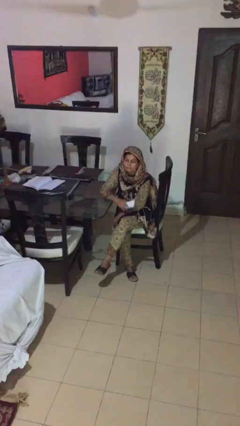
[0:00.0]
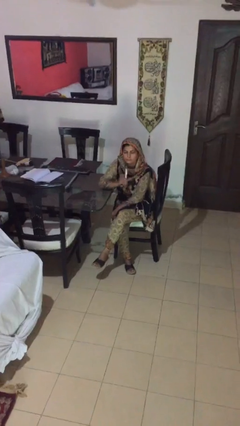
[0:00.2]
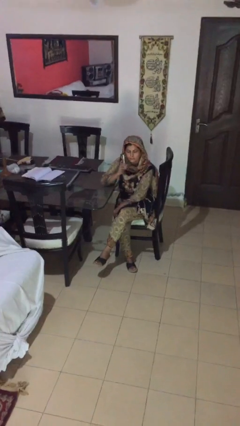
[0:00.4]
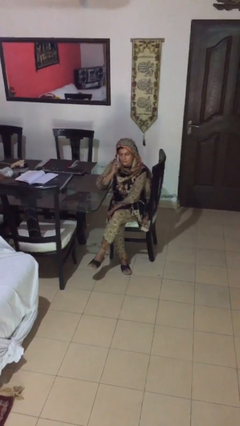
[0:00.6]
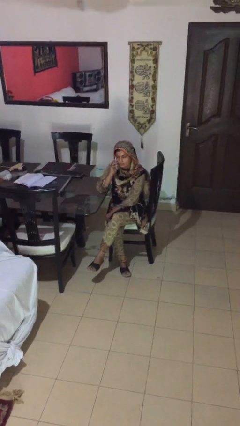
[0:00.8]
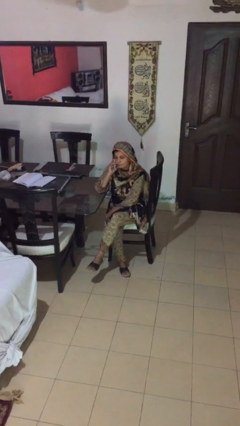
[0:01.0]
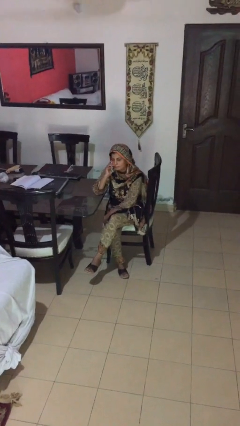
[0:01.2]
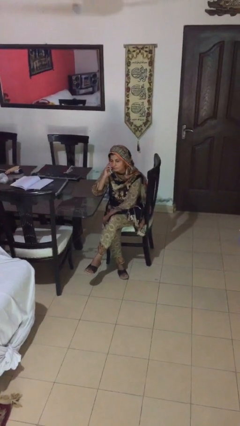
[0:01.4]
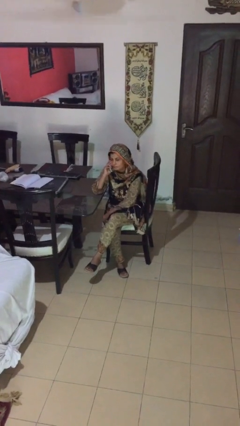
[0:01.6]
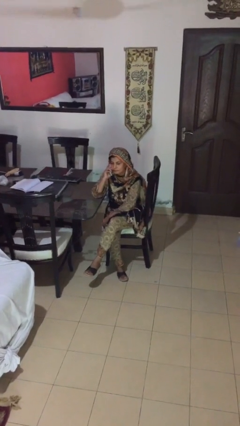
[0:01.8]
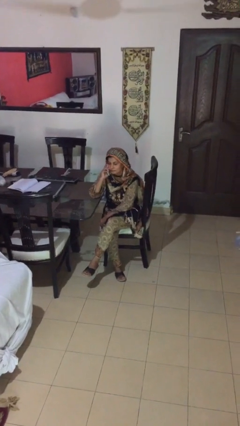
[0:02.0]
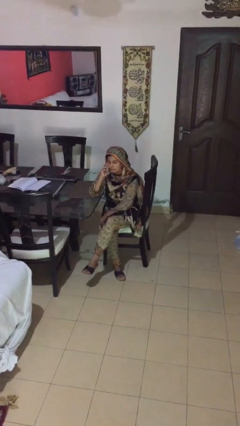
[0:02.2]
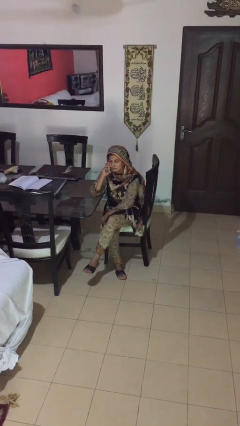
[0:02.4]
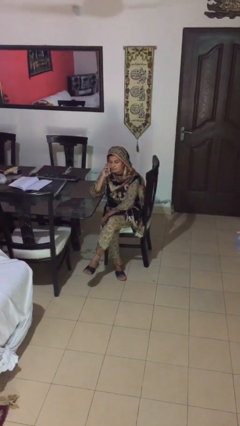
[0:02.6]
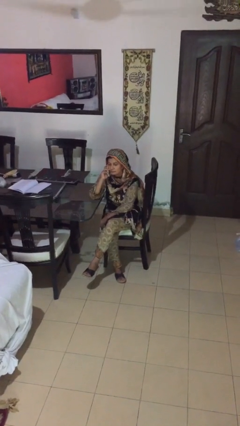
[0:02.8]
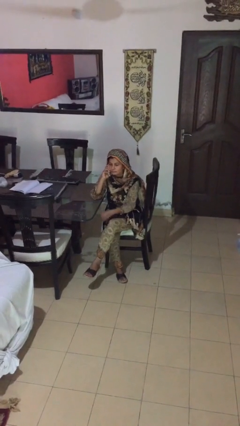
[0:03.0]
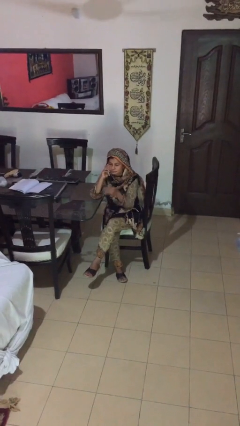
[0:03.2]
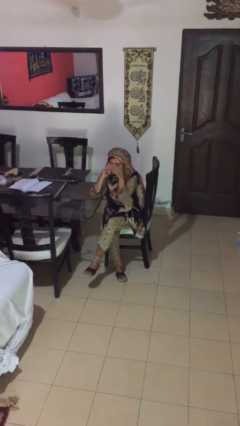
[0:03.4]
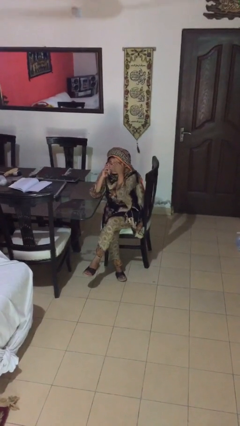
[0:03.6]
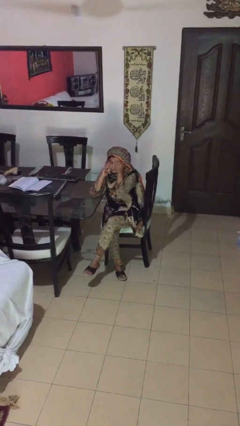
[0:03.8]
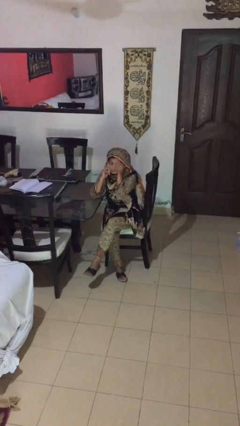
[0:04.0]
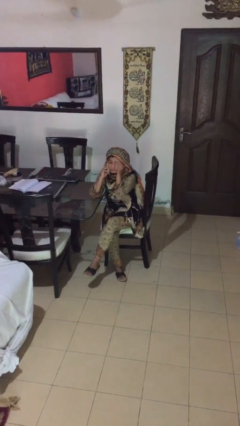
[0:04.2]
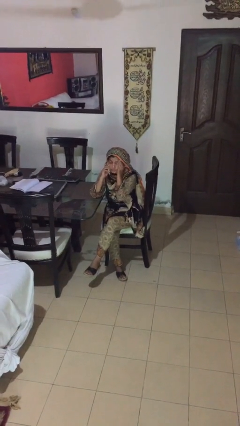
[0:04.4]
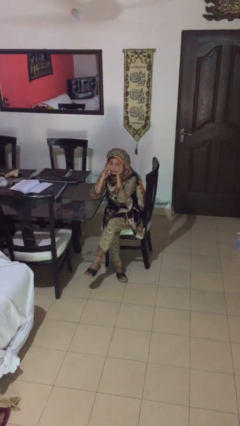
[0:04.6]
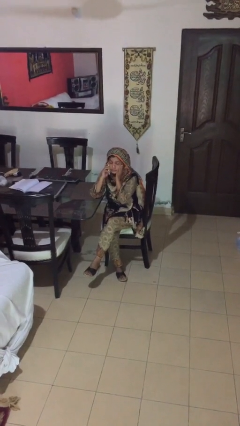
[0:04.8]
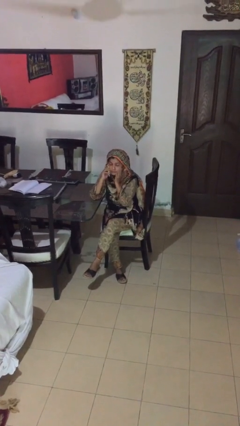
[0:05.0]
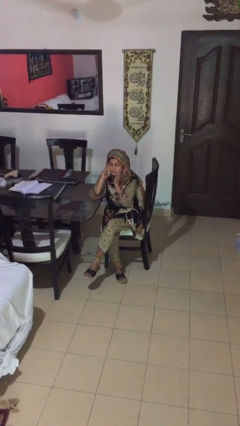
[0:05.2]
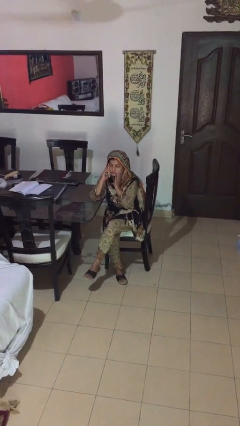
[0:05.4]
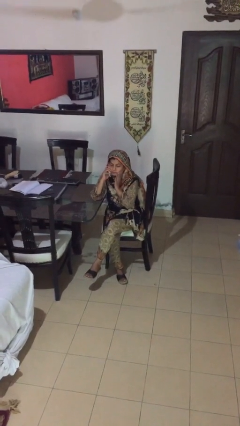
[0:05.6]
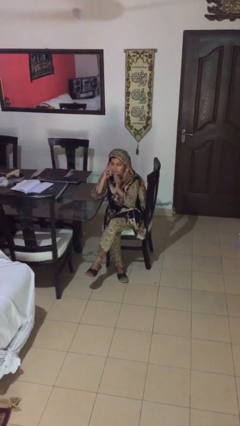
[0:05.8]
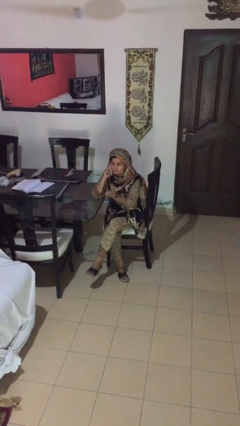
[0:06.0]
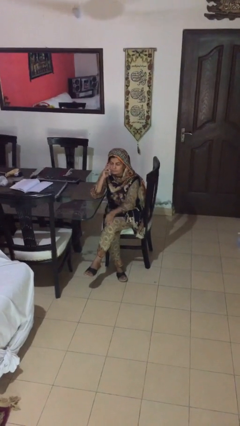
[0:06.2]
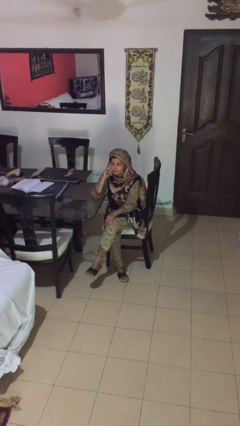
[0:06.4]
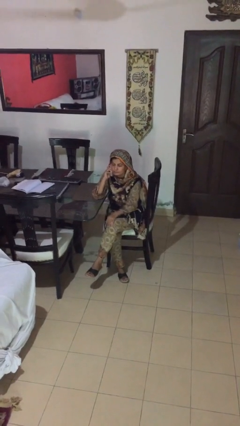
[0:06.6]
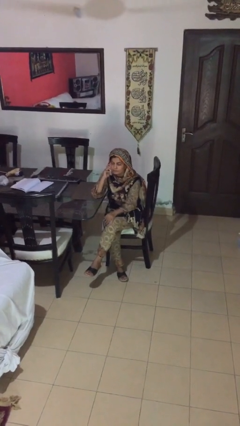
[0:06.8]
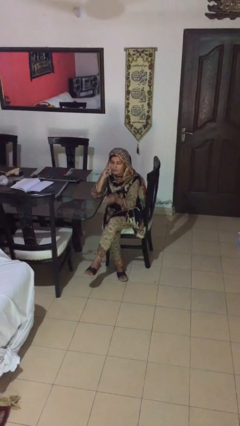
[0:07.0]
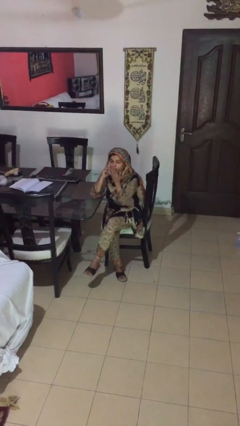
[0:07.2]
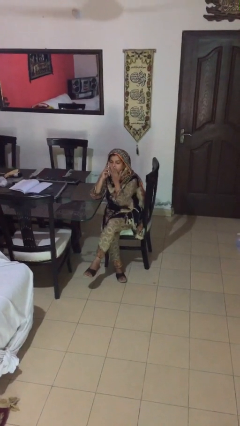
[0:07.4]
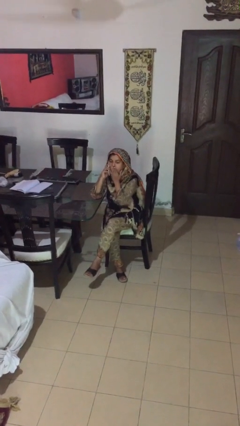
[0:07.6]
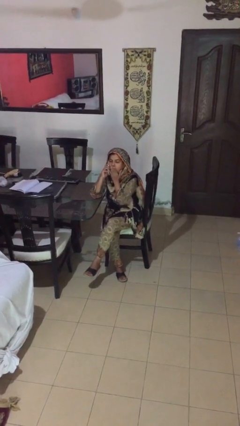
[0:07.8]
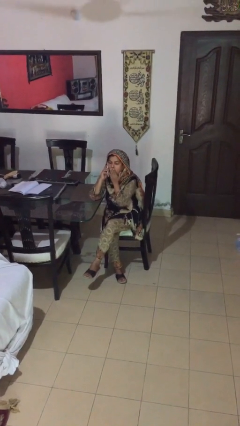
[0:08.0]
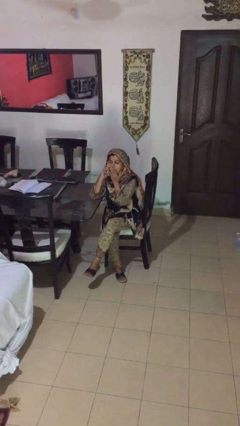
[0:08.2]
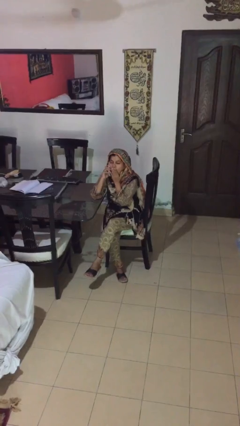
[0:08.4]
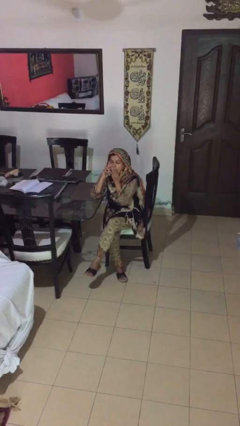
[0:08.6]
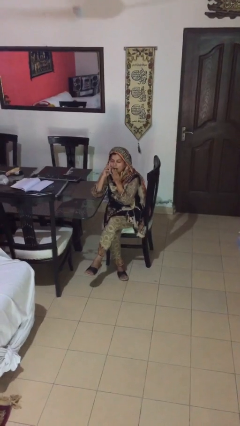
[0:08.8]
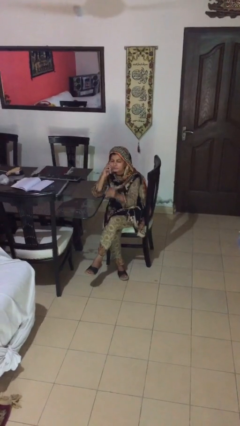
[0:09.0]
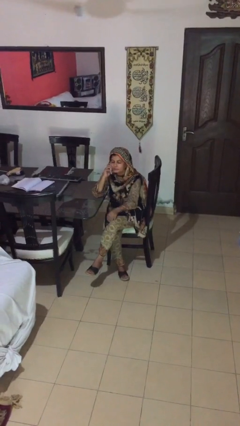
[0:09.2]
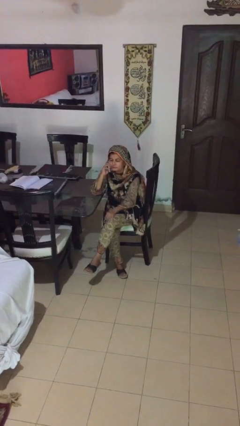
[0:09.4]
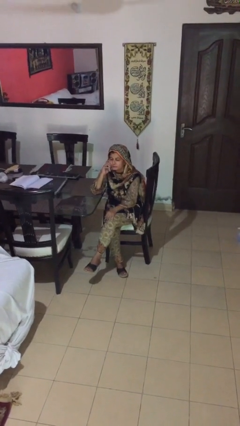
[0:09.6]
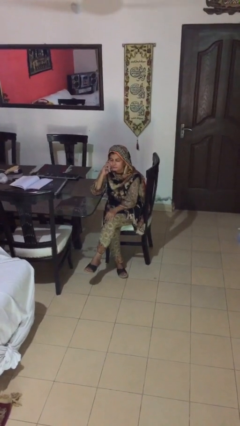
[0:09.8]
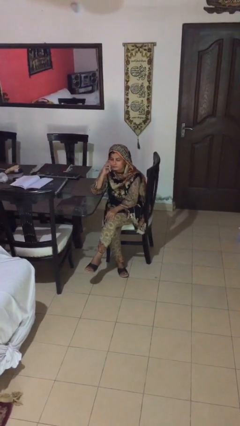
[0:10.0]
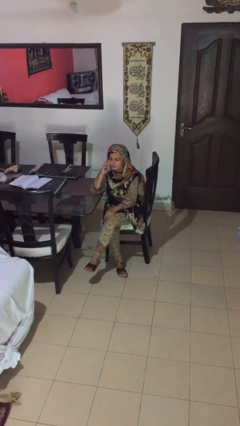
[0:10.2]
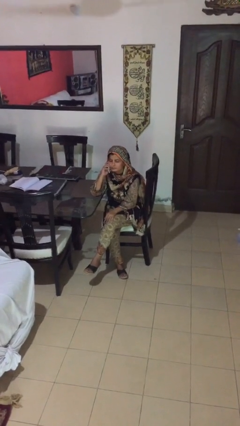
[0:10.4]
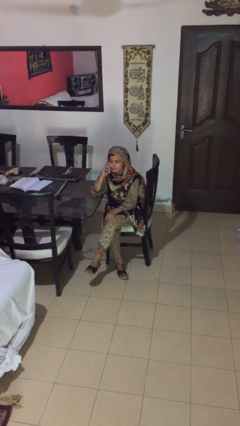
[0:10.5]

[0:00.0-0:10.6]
person talks on phone

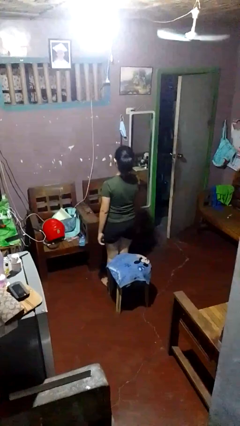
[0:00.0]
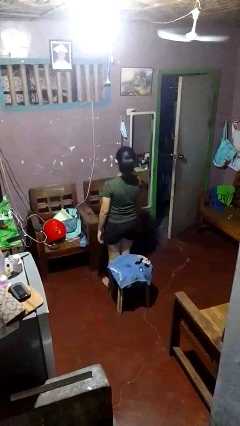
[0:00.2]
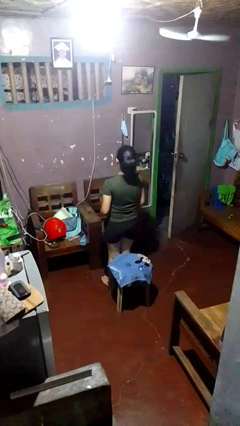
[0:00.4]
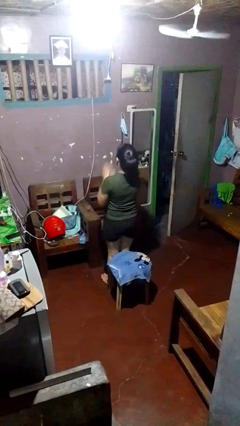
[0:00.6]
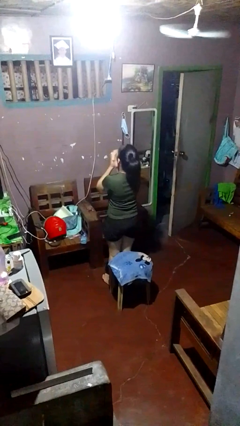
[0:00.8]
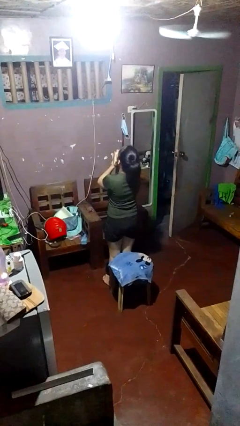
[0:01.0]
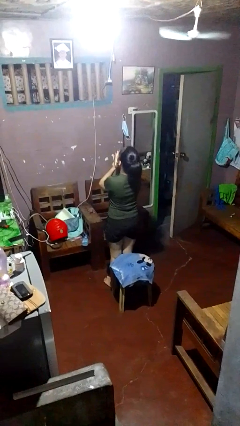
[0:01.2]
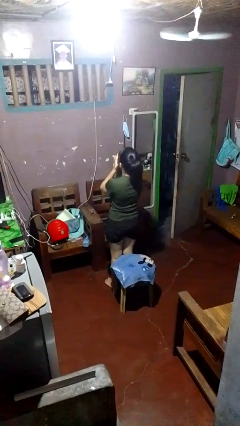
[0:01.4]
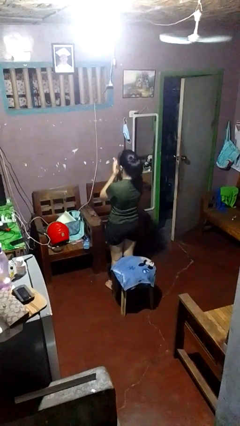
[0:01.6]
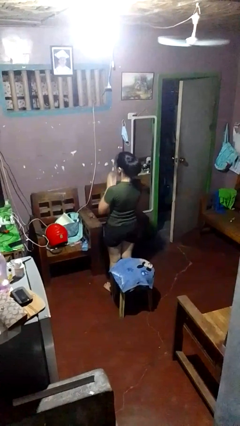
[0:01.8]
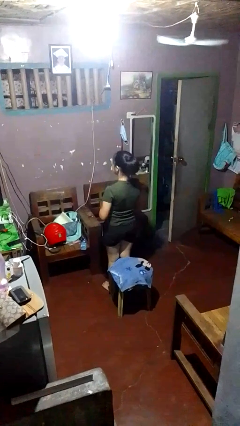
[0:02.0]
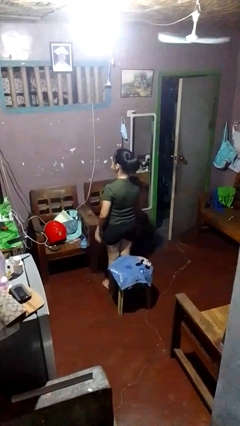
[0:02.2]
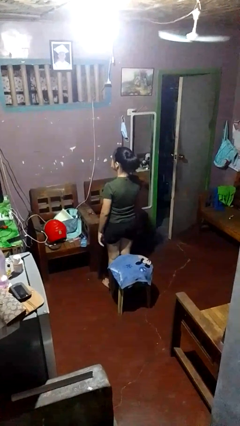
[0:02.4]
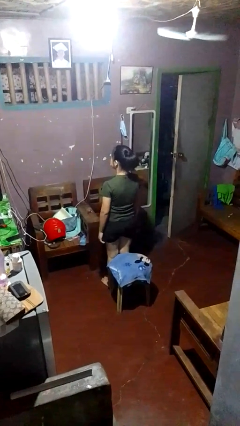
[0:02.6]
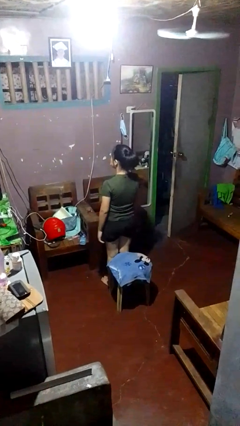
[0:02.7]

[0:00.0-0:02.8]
person yawns

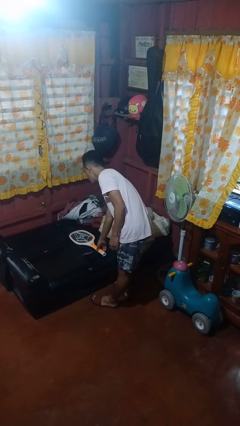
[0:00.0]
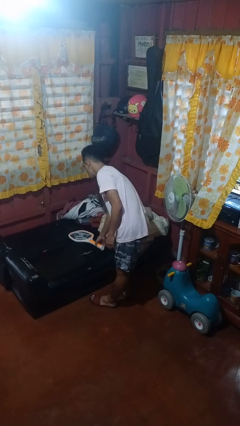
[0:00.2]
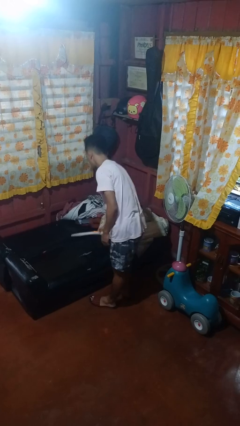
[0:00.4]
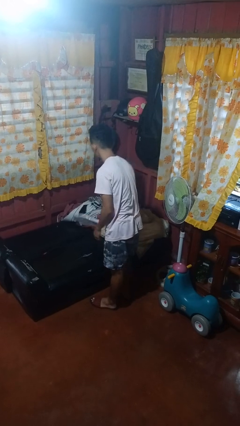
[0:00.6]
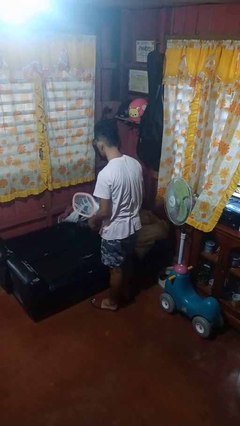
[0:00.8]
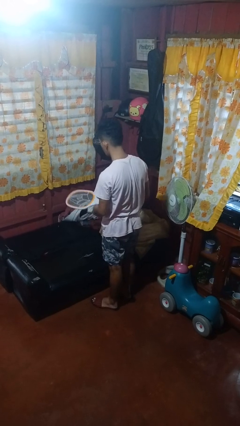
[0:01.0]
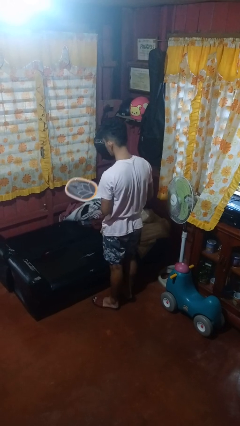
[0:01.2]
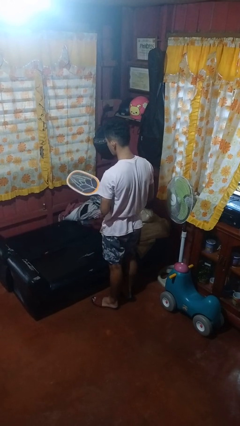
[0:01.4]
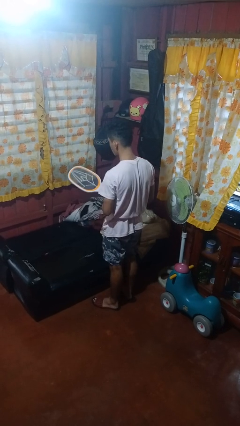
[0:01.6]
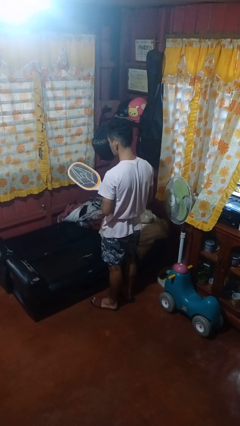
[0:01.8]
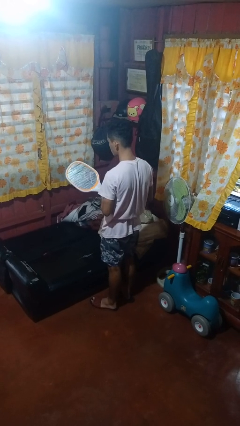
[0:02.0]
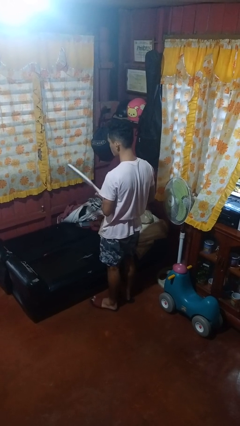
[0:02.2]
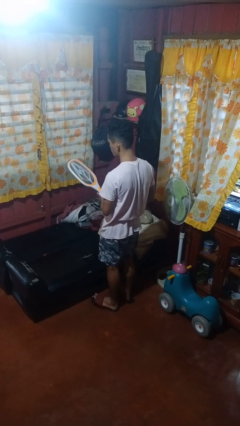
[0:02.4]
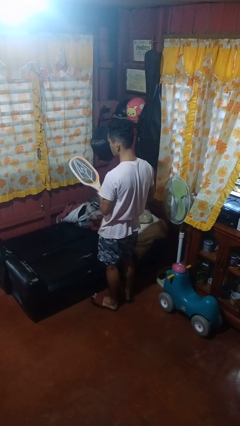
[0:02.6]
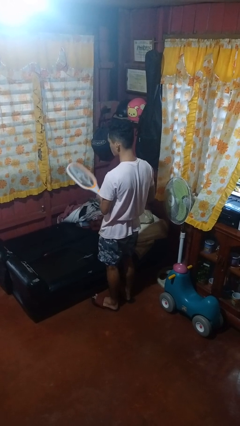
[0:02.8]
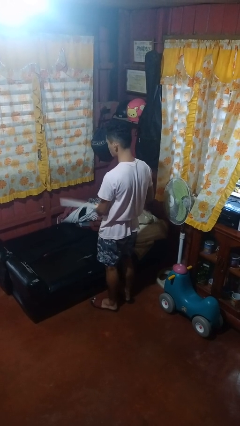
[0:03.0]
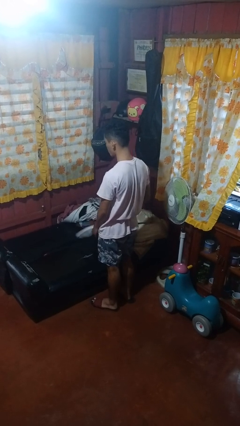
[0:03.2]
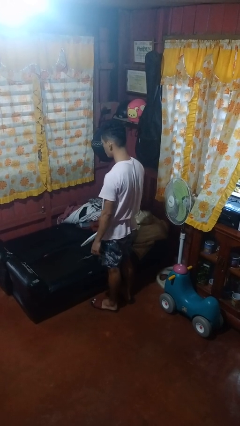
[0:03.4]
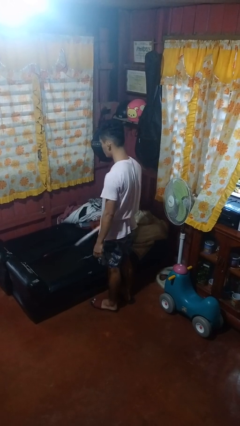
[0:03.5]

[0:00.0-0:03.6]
person picks up object from couch

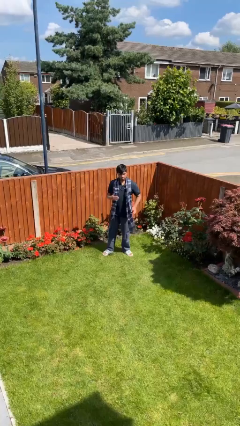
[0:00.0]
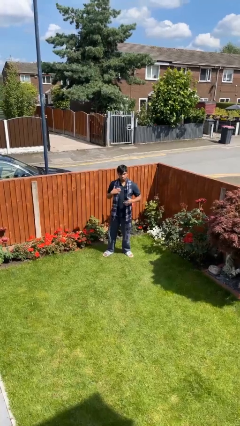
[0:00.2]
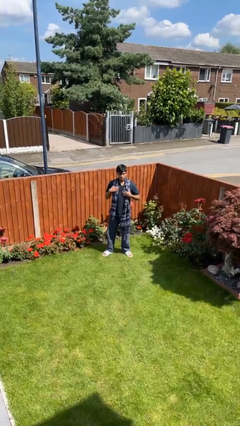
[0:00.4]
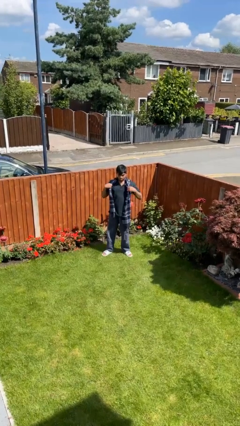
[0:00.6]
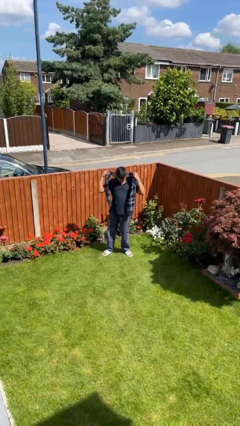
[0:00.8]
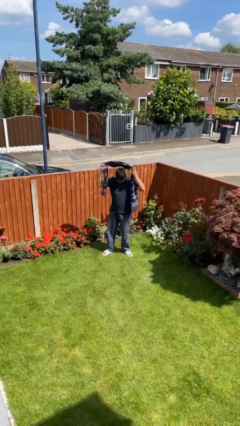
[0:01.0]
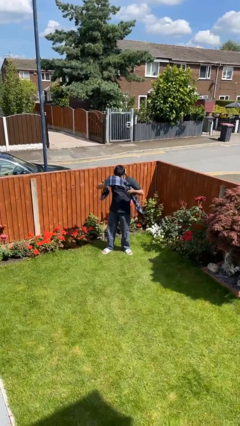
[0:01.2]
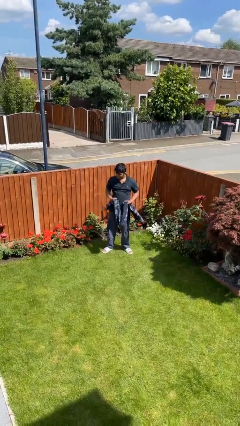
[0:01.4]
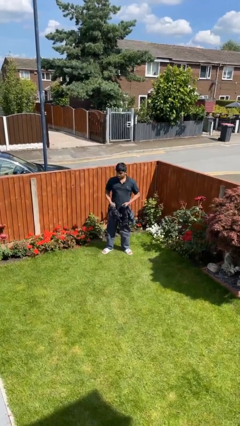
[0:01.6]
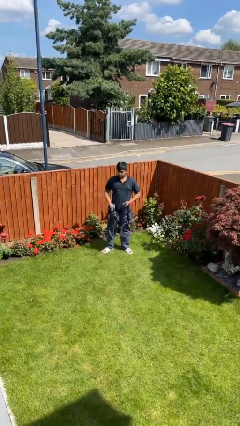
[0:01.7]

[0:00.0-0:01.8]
person takes off scarf
